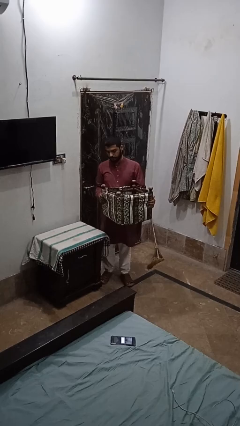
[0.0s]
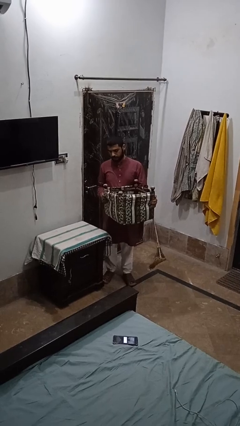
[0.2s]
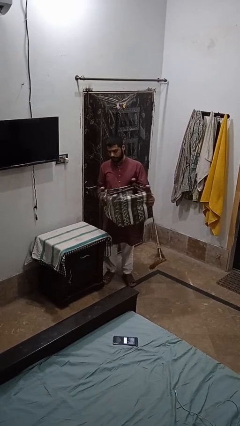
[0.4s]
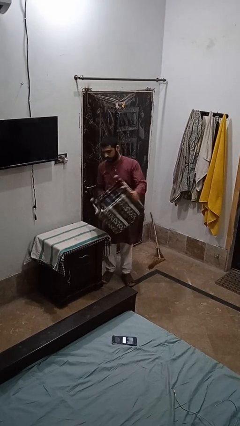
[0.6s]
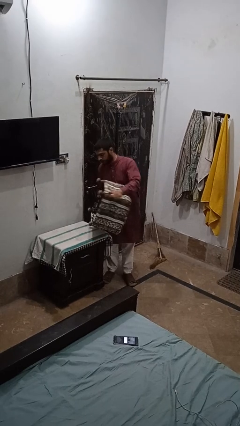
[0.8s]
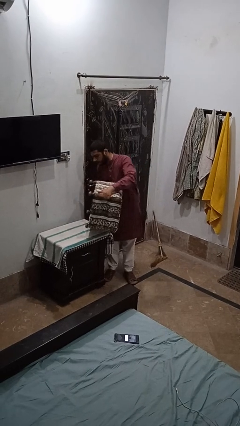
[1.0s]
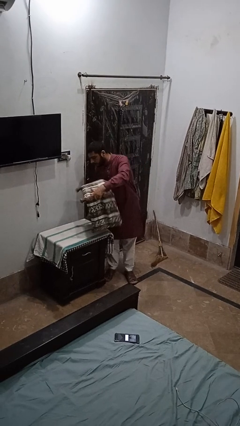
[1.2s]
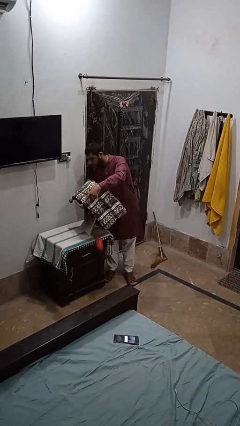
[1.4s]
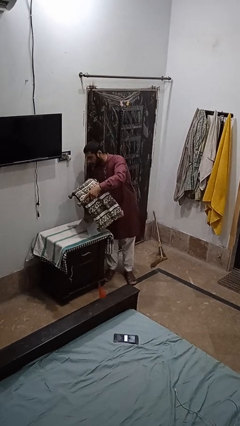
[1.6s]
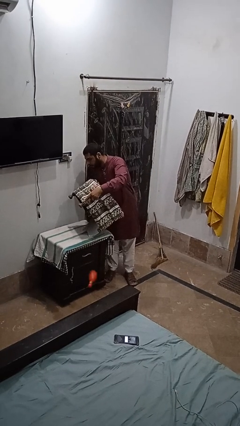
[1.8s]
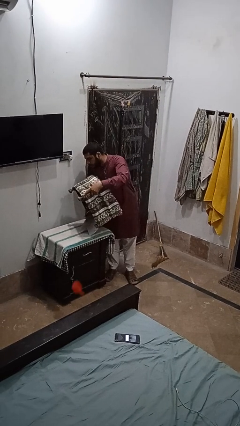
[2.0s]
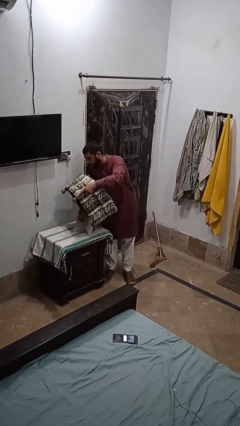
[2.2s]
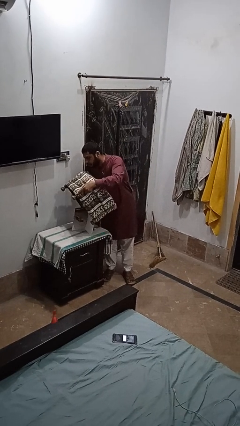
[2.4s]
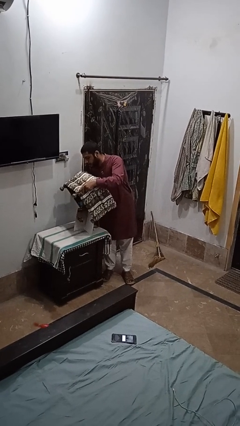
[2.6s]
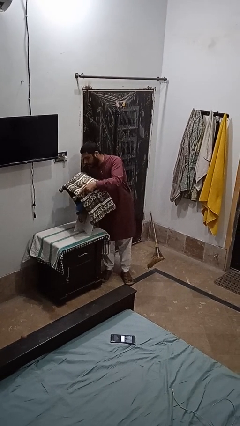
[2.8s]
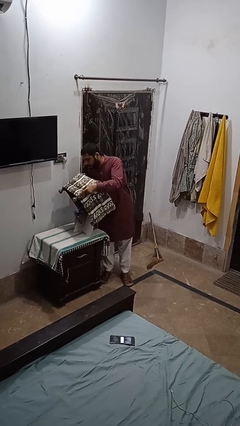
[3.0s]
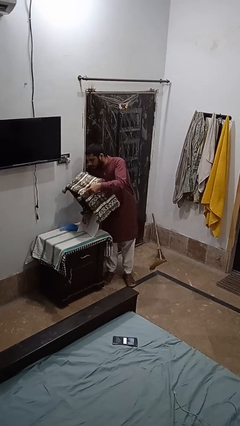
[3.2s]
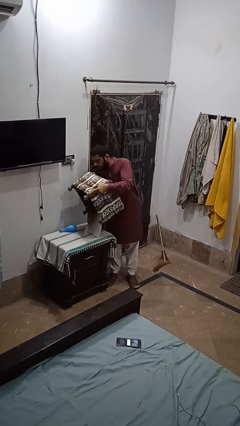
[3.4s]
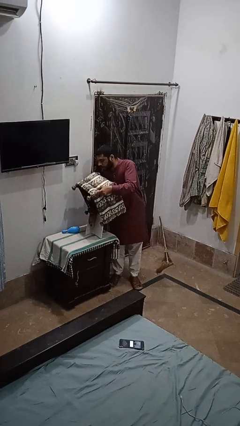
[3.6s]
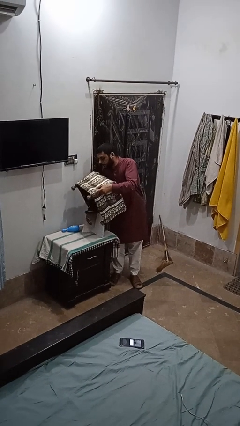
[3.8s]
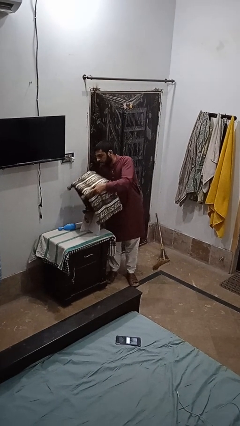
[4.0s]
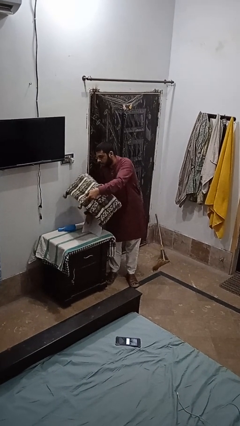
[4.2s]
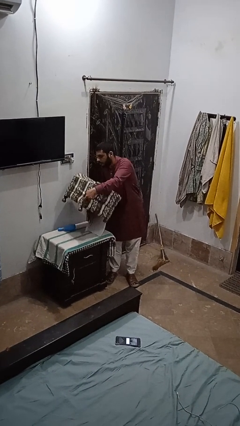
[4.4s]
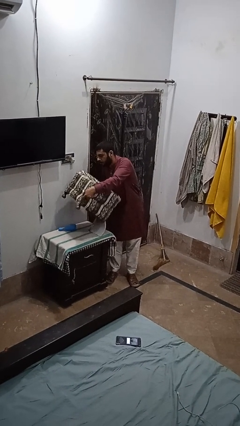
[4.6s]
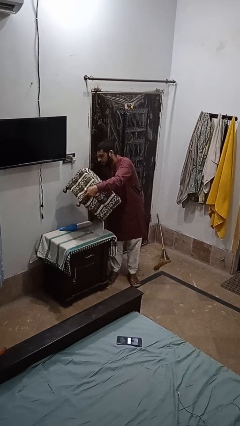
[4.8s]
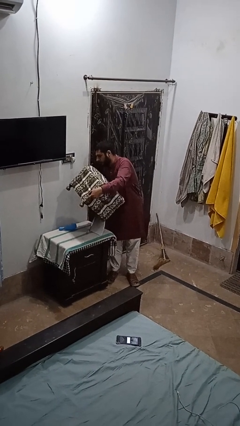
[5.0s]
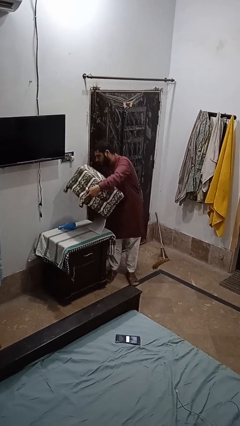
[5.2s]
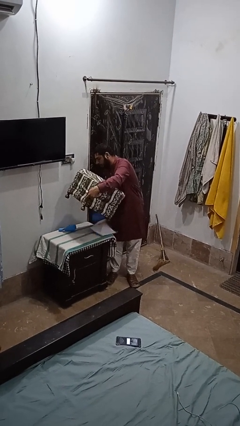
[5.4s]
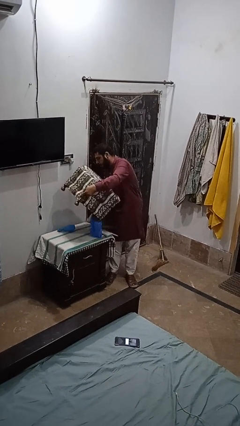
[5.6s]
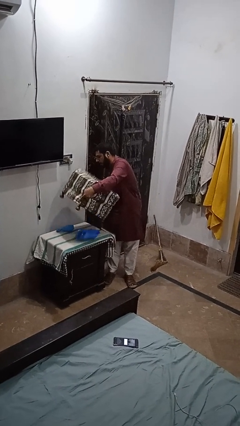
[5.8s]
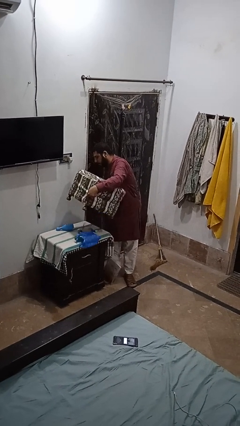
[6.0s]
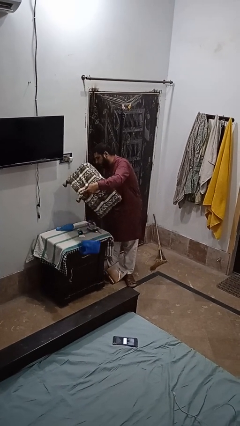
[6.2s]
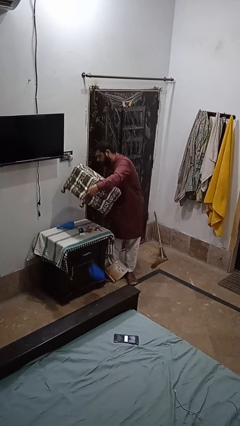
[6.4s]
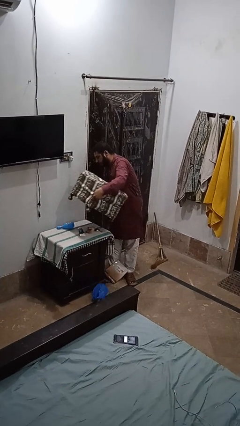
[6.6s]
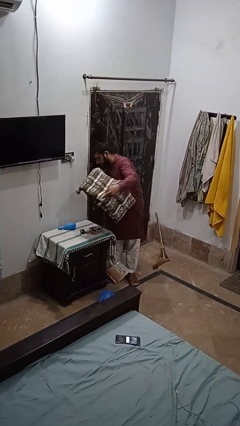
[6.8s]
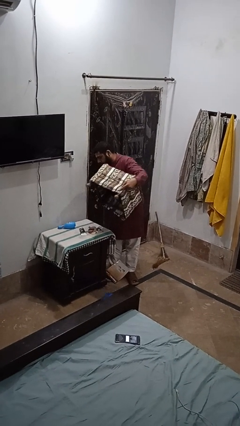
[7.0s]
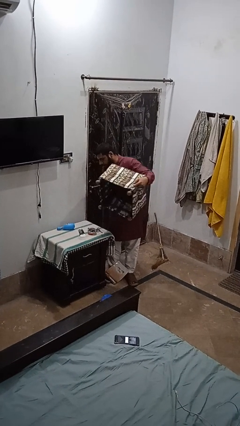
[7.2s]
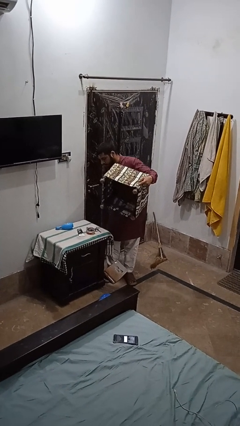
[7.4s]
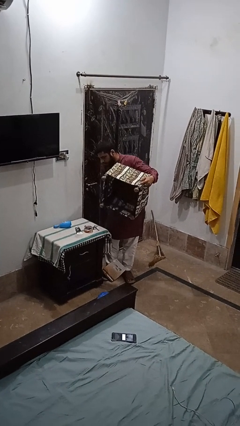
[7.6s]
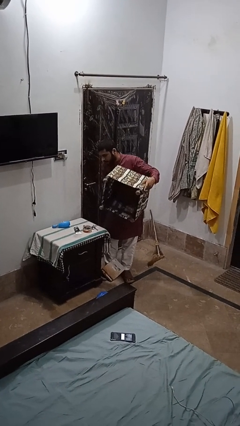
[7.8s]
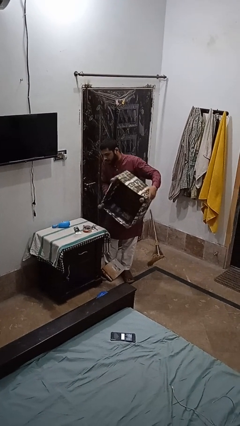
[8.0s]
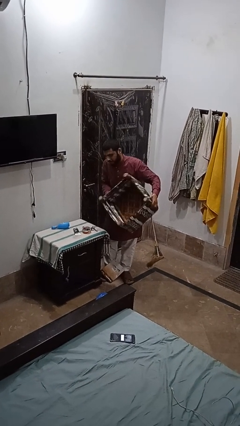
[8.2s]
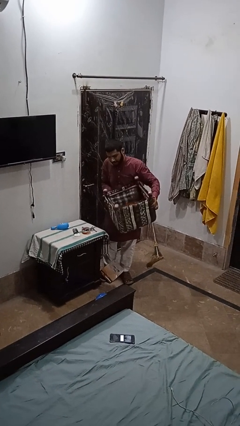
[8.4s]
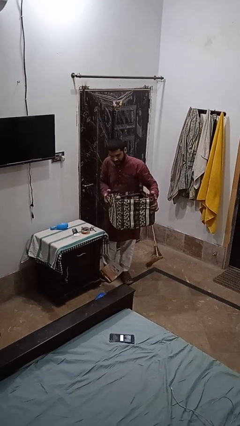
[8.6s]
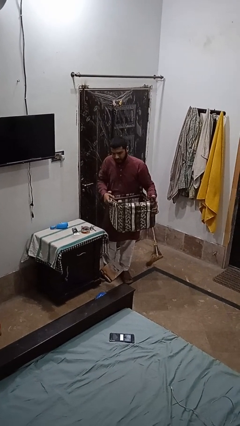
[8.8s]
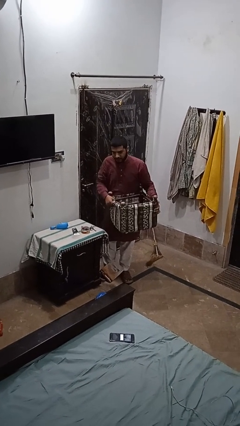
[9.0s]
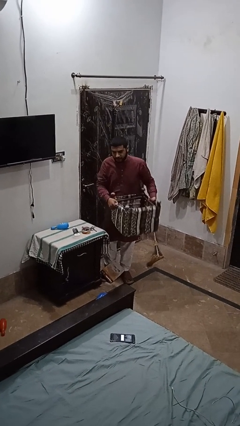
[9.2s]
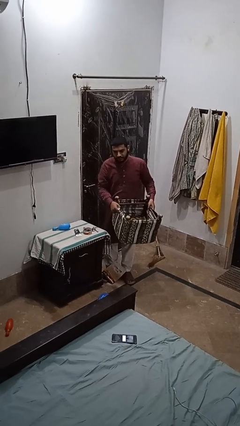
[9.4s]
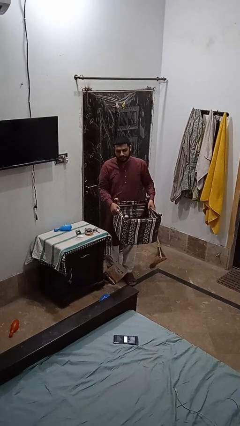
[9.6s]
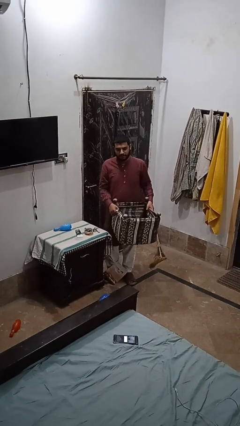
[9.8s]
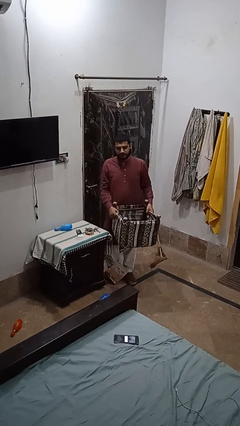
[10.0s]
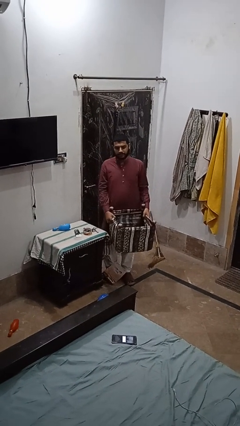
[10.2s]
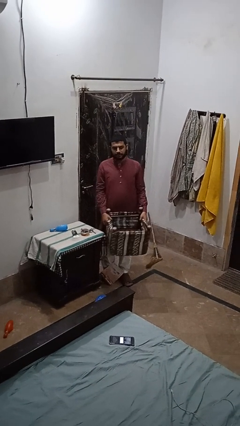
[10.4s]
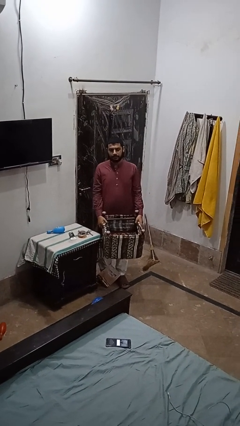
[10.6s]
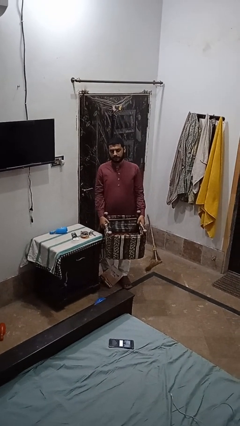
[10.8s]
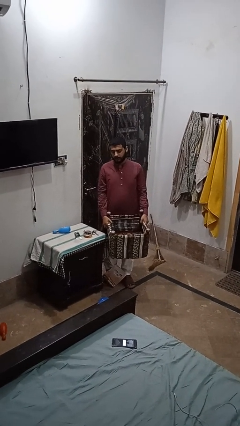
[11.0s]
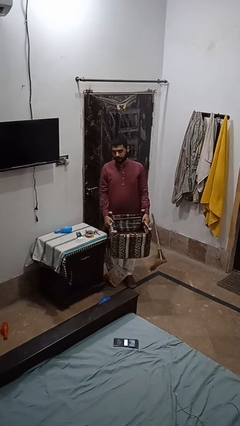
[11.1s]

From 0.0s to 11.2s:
person unloads box onto table

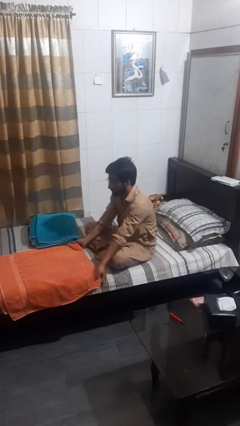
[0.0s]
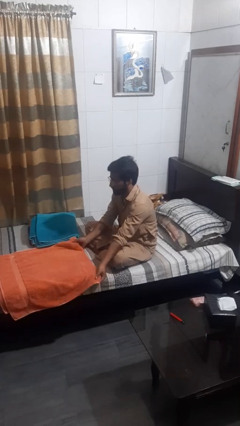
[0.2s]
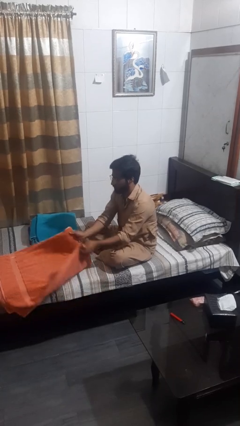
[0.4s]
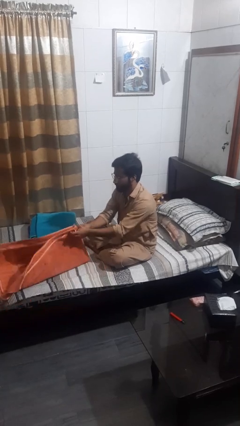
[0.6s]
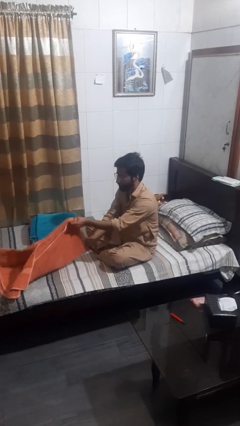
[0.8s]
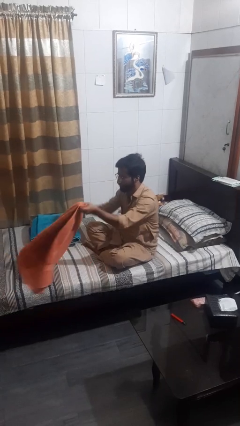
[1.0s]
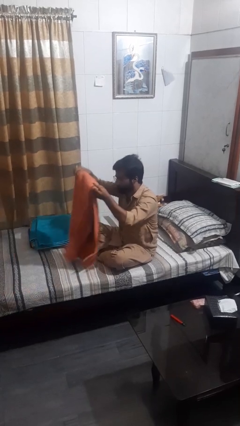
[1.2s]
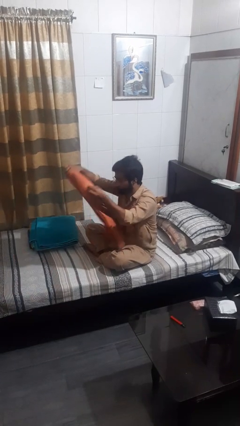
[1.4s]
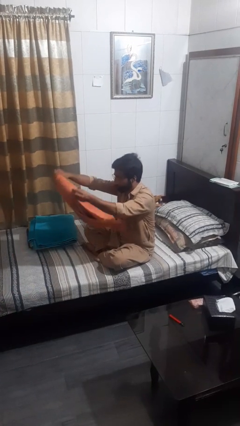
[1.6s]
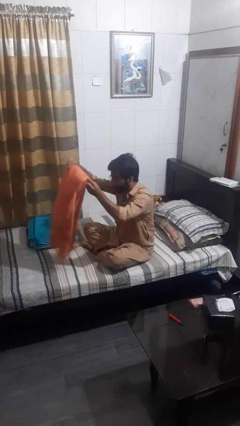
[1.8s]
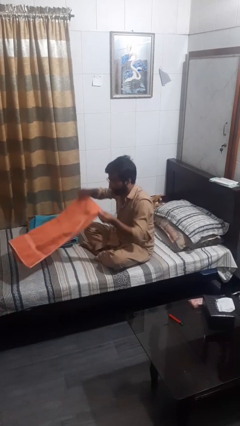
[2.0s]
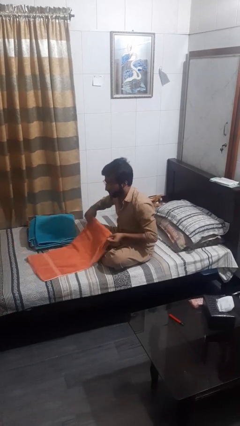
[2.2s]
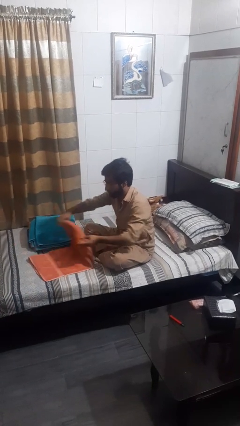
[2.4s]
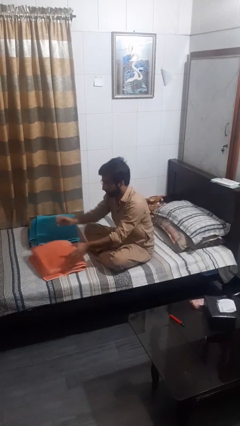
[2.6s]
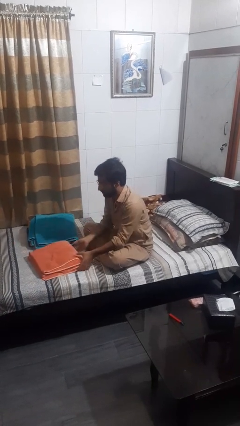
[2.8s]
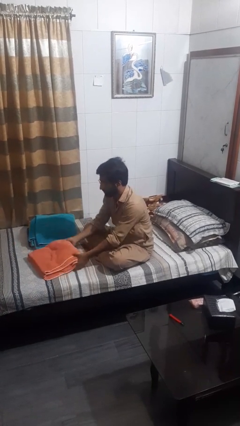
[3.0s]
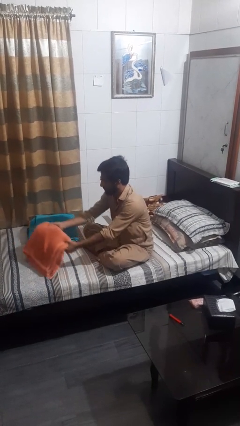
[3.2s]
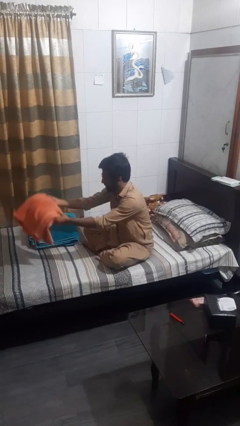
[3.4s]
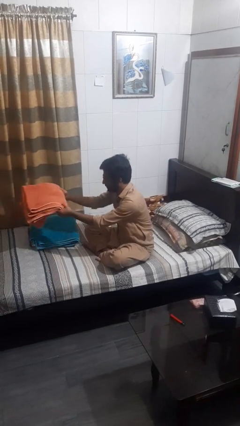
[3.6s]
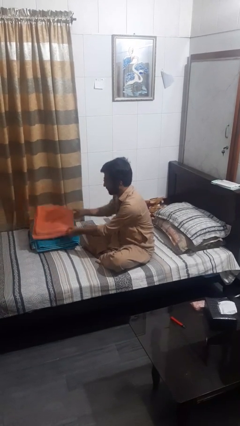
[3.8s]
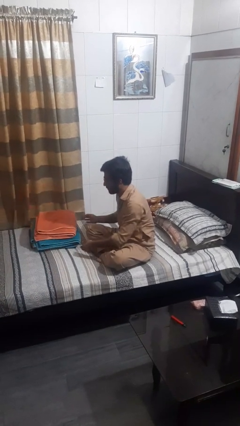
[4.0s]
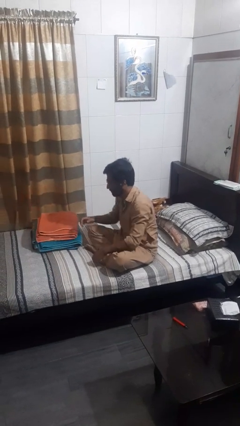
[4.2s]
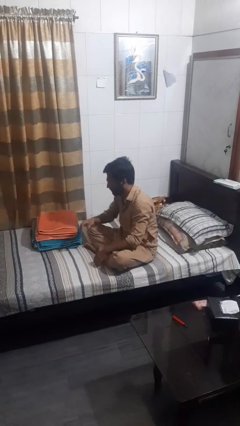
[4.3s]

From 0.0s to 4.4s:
person folds towel

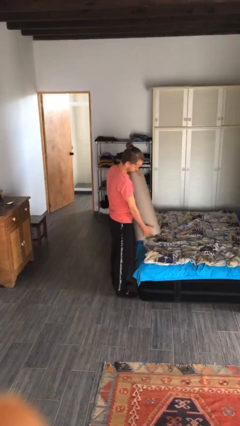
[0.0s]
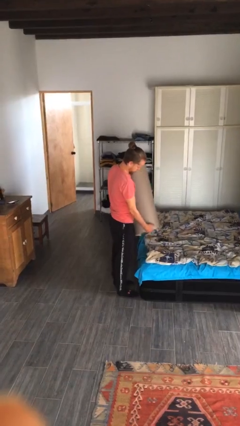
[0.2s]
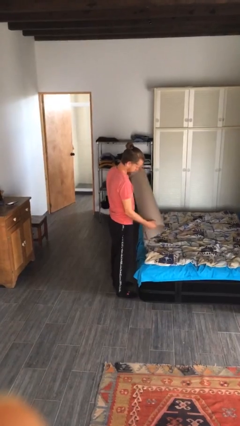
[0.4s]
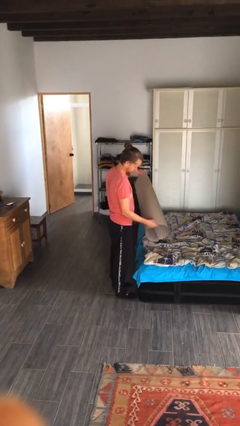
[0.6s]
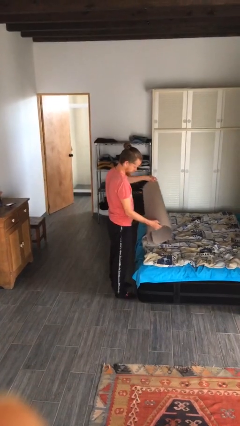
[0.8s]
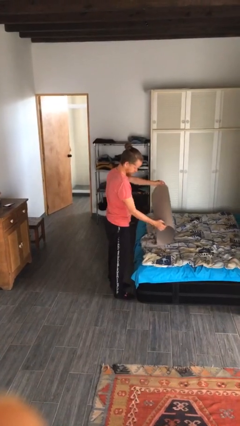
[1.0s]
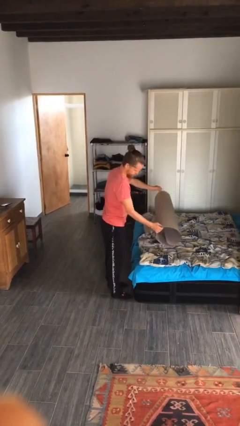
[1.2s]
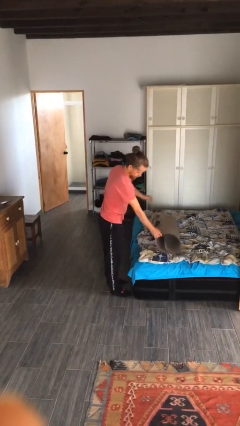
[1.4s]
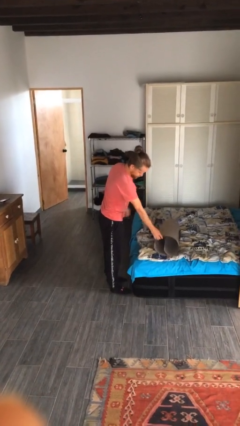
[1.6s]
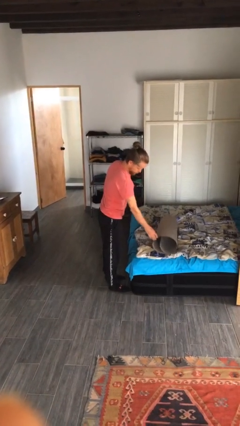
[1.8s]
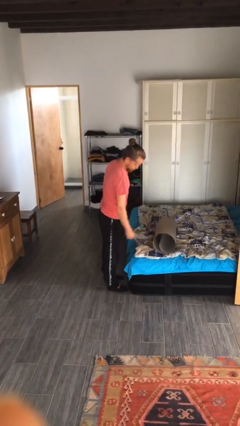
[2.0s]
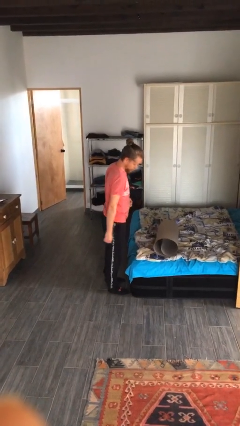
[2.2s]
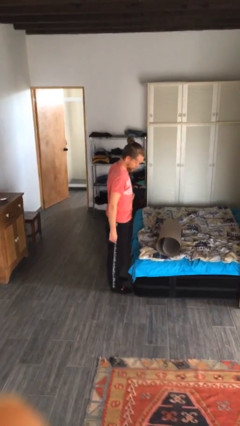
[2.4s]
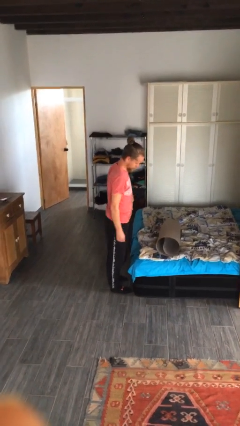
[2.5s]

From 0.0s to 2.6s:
person puts down object on bed
